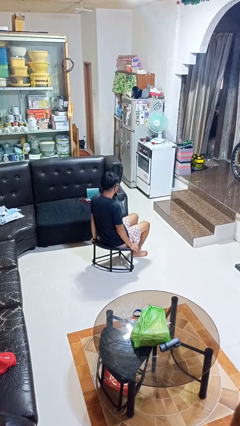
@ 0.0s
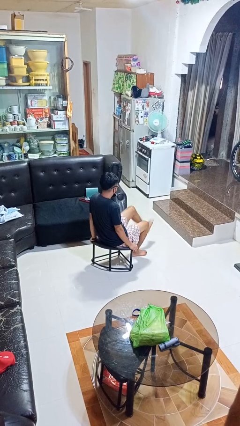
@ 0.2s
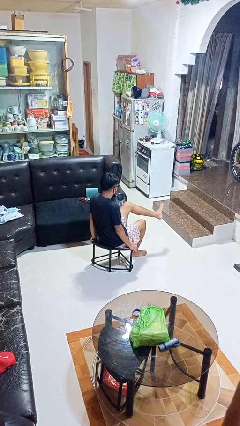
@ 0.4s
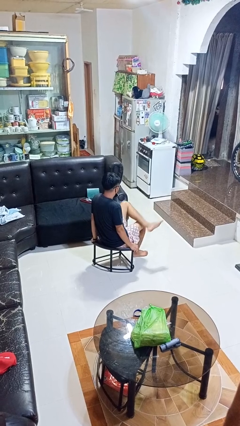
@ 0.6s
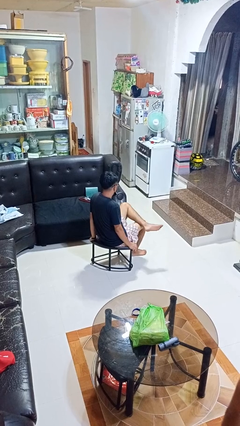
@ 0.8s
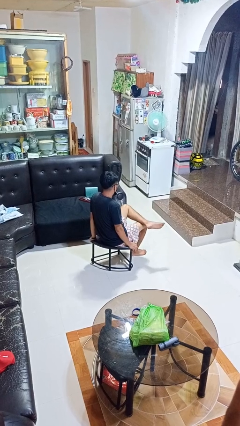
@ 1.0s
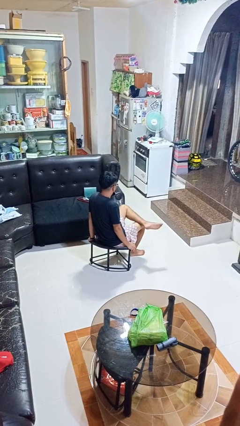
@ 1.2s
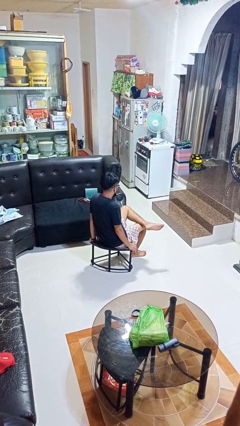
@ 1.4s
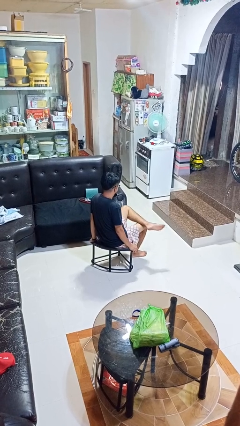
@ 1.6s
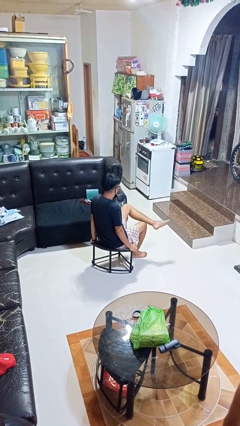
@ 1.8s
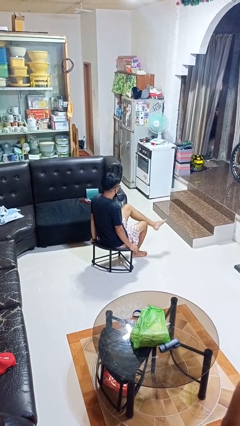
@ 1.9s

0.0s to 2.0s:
person crosses legs

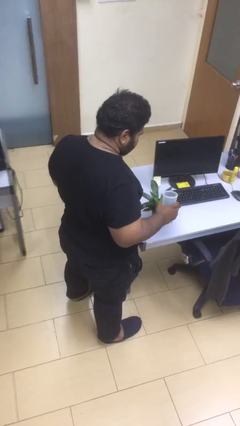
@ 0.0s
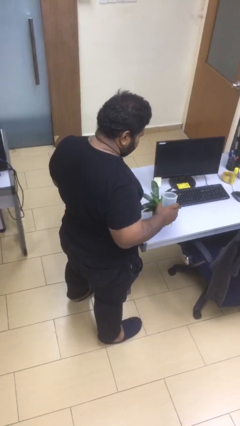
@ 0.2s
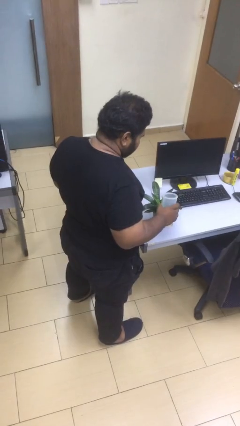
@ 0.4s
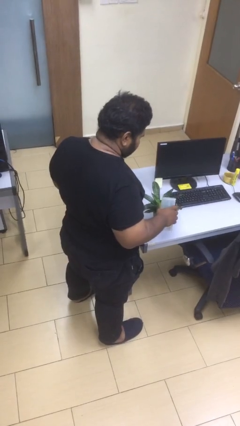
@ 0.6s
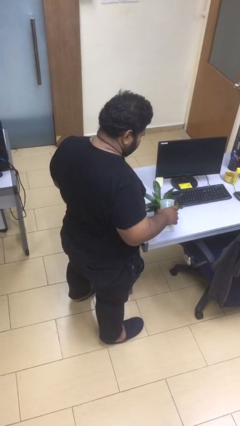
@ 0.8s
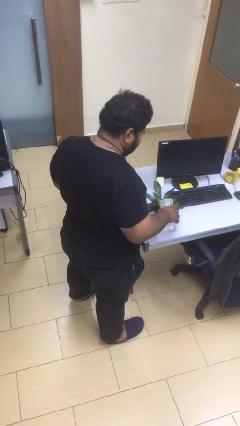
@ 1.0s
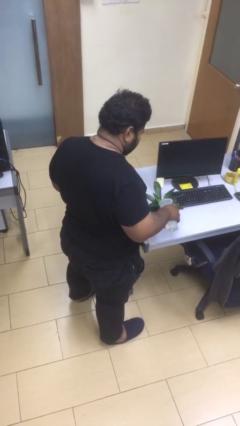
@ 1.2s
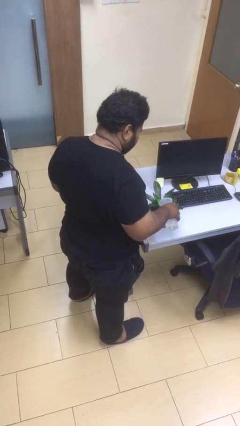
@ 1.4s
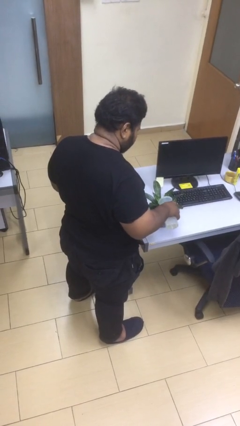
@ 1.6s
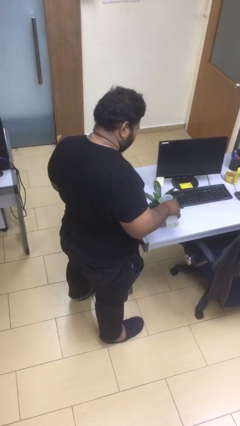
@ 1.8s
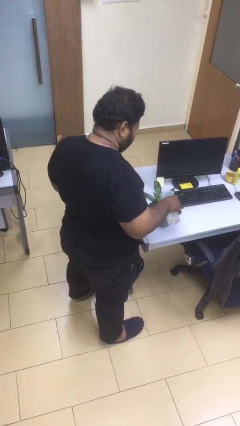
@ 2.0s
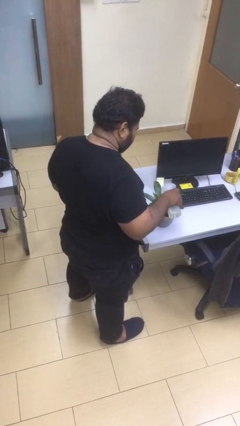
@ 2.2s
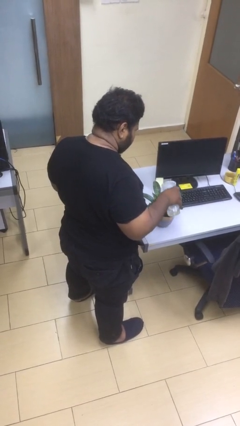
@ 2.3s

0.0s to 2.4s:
person waters houseplant

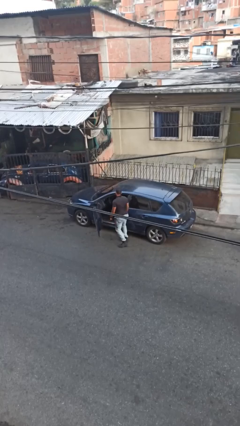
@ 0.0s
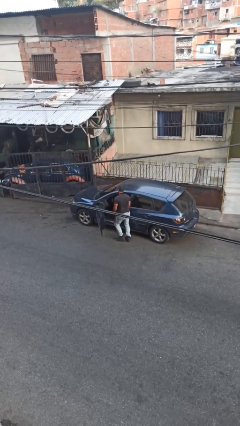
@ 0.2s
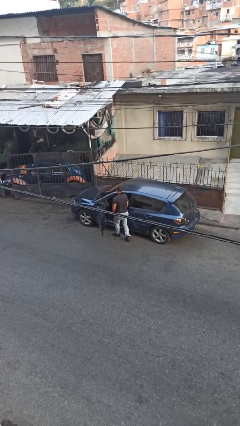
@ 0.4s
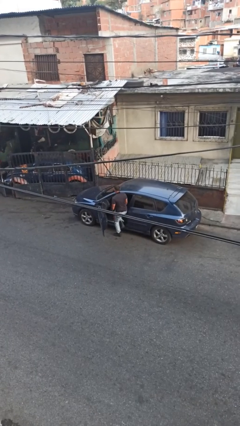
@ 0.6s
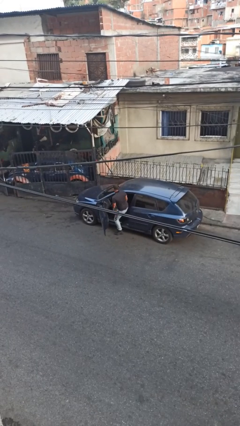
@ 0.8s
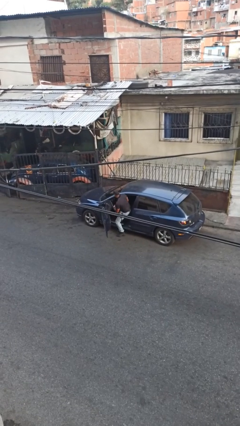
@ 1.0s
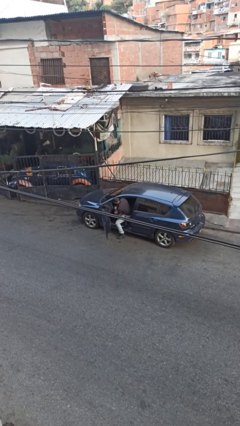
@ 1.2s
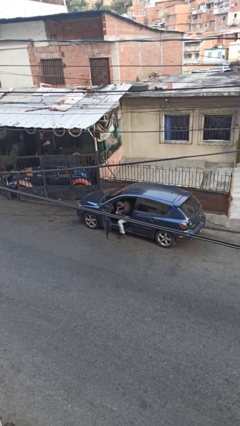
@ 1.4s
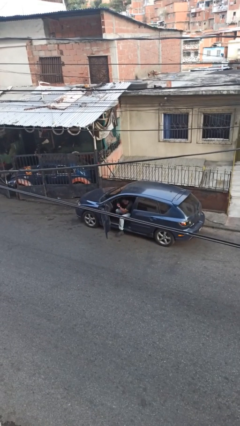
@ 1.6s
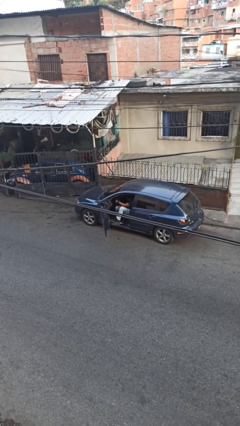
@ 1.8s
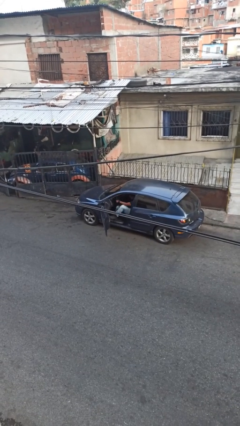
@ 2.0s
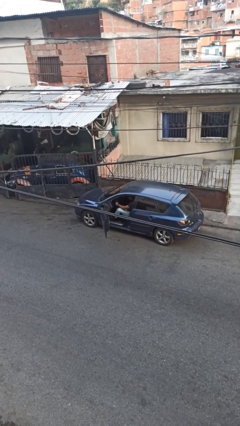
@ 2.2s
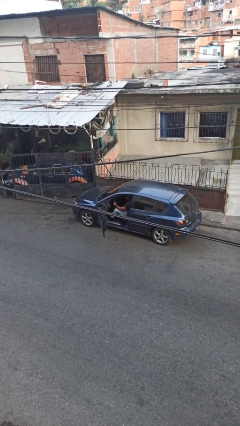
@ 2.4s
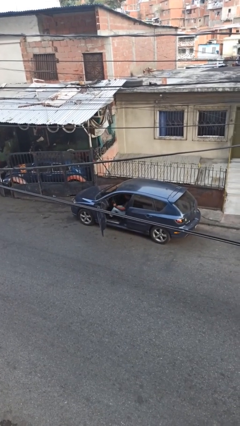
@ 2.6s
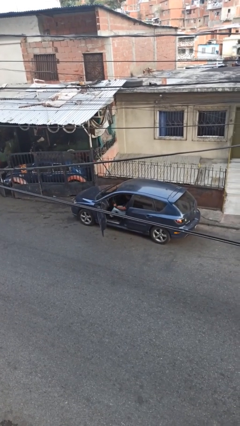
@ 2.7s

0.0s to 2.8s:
person enters car

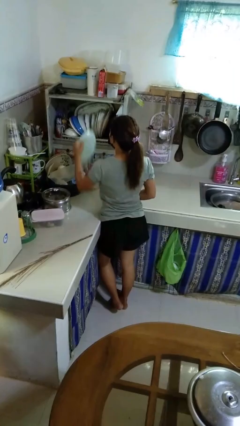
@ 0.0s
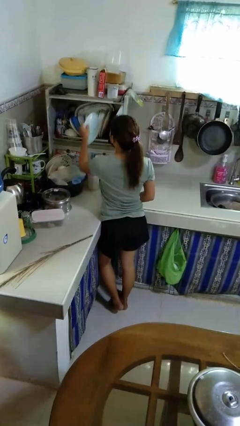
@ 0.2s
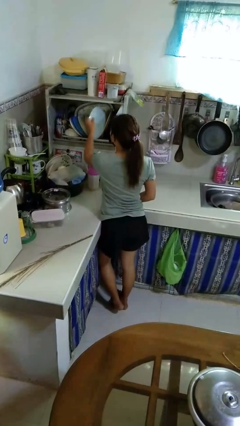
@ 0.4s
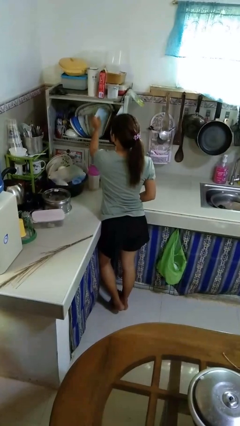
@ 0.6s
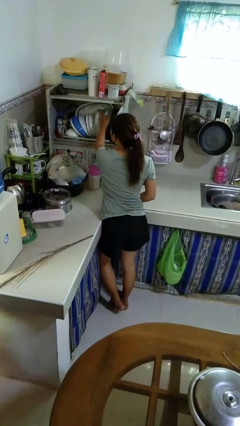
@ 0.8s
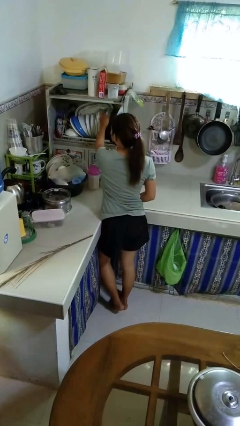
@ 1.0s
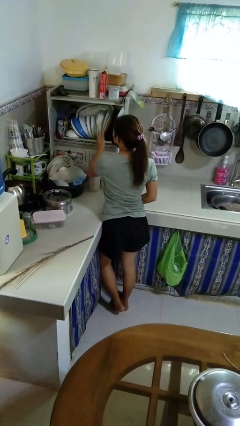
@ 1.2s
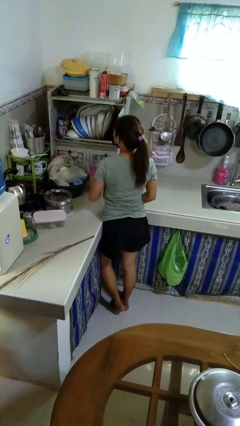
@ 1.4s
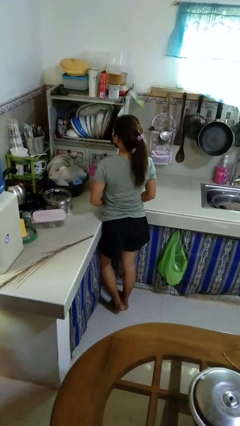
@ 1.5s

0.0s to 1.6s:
person puts object into kitchen drawer

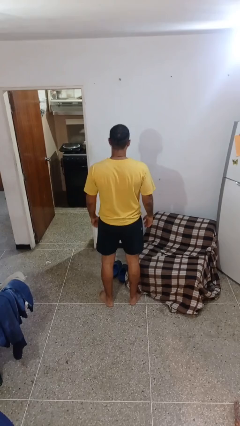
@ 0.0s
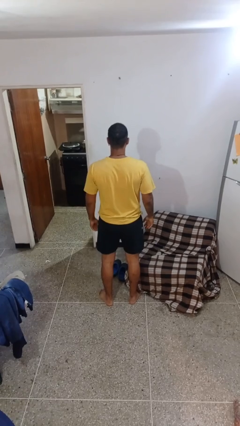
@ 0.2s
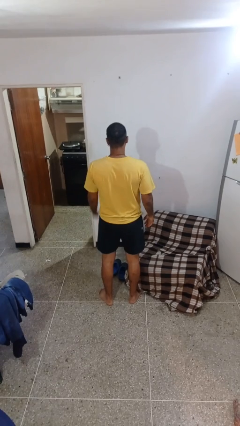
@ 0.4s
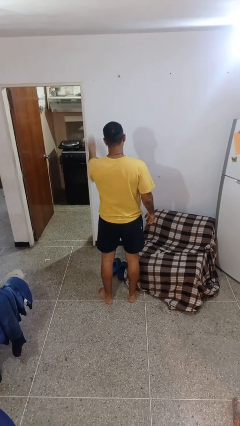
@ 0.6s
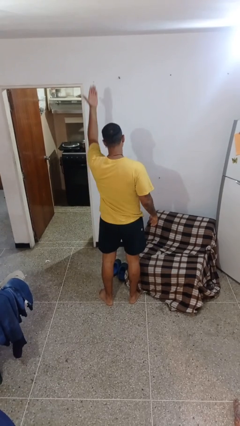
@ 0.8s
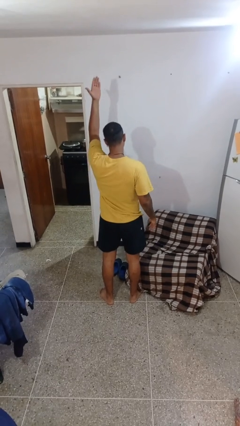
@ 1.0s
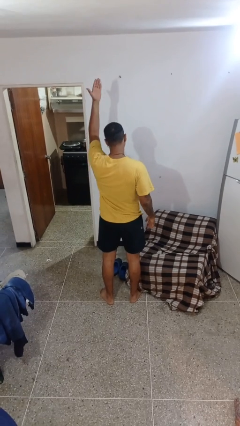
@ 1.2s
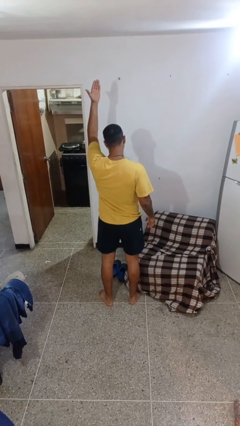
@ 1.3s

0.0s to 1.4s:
person gestures swipe up

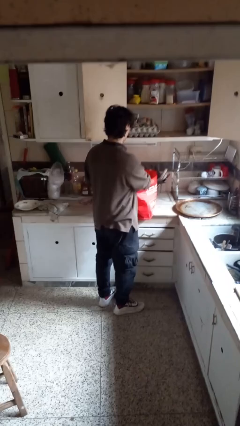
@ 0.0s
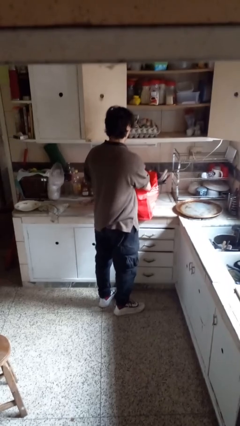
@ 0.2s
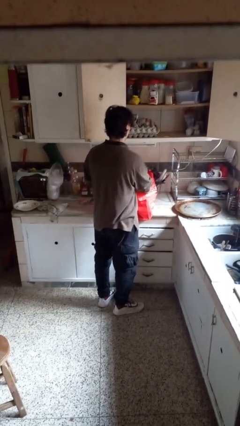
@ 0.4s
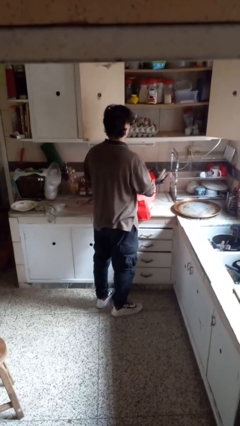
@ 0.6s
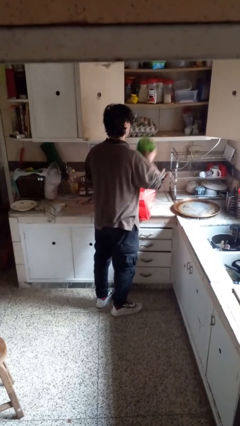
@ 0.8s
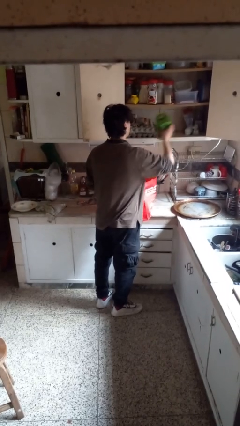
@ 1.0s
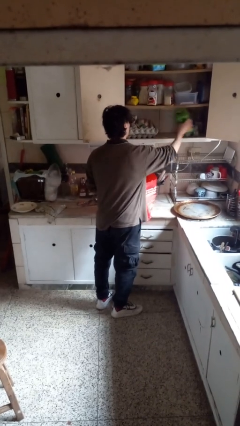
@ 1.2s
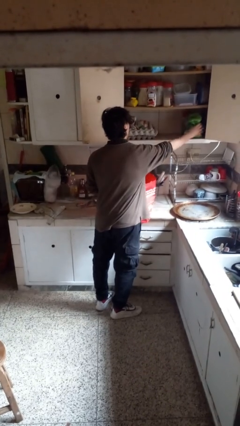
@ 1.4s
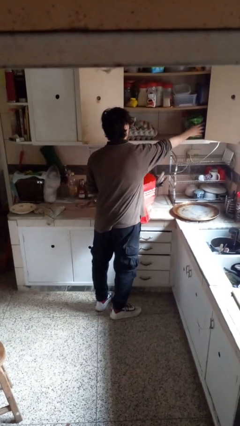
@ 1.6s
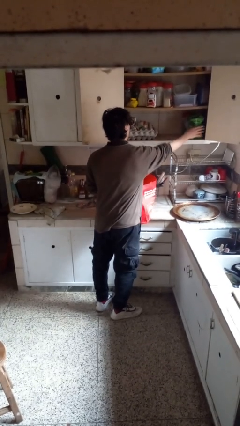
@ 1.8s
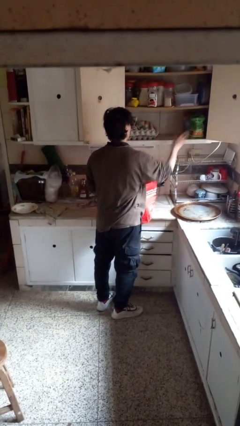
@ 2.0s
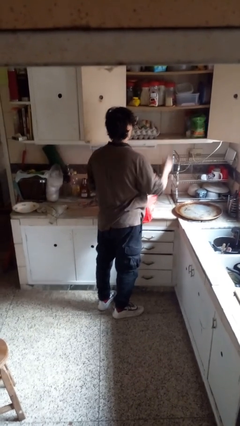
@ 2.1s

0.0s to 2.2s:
person loads groceries into cabinet

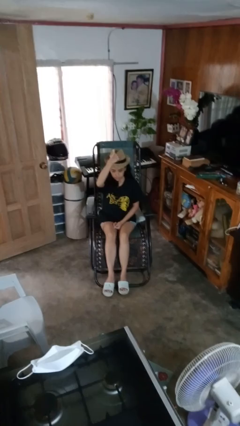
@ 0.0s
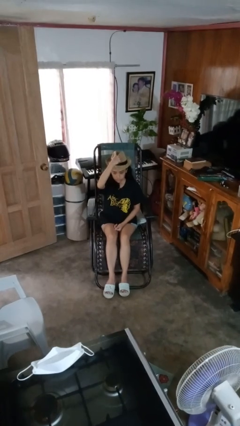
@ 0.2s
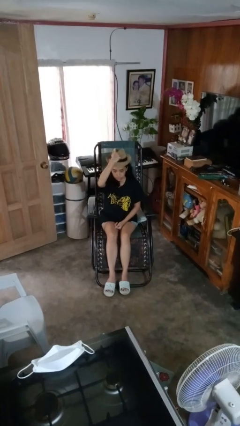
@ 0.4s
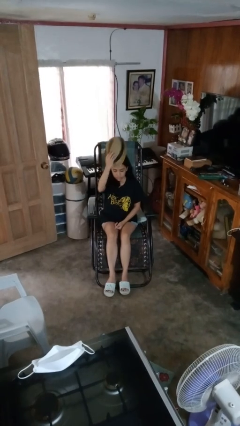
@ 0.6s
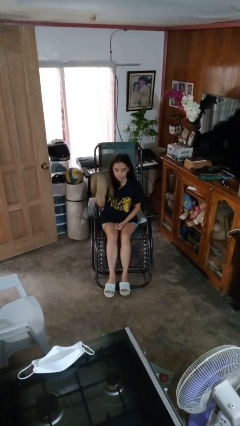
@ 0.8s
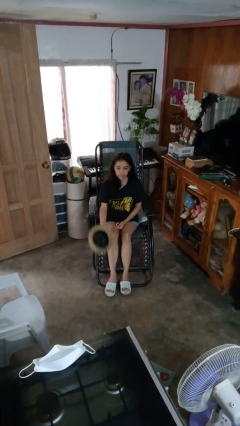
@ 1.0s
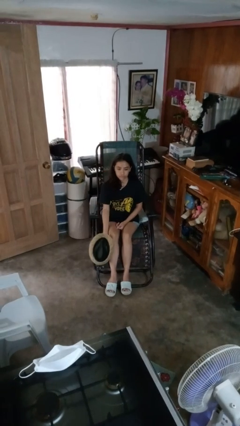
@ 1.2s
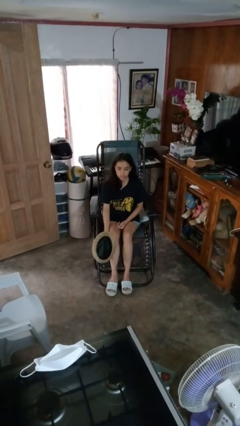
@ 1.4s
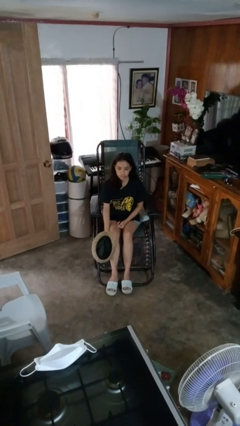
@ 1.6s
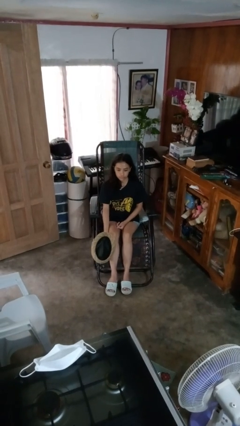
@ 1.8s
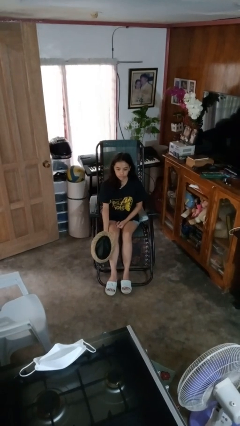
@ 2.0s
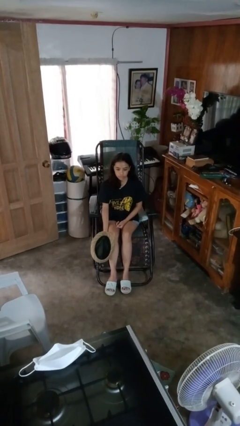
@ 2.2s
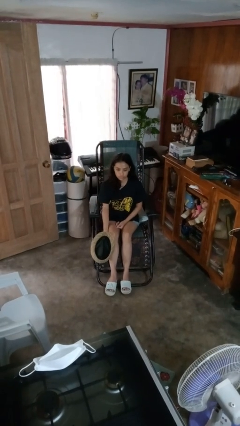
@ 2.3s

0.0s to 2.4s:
person takes off hat

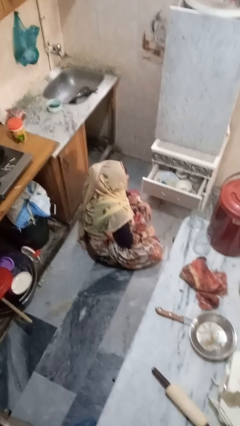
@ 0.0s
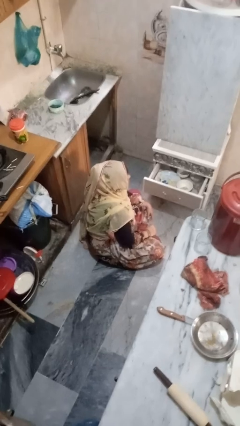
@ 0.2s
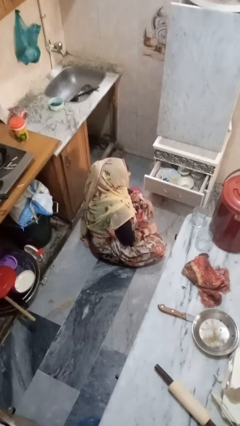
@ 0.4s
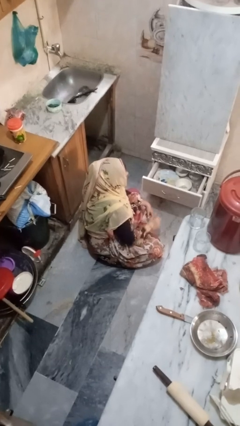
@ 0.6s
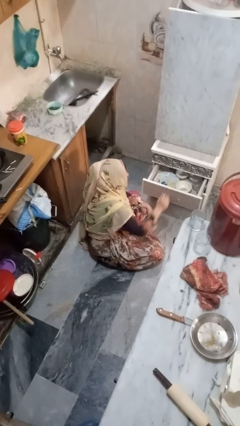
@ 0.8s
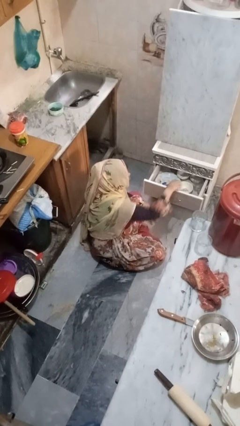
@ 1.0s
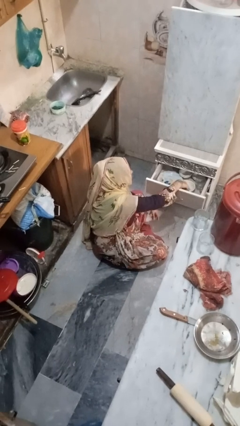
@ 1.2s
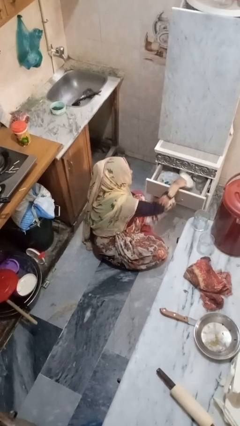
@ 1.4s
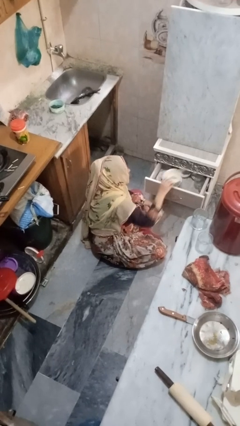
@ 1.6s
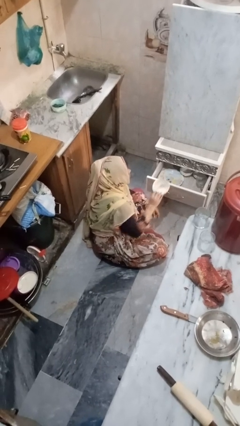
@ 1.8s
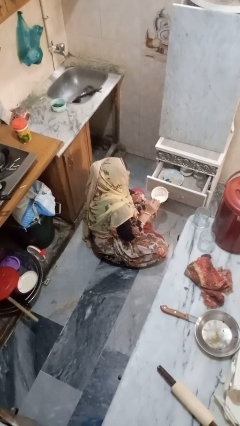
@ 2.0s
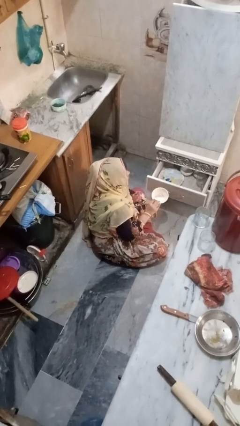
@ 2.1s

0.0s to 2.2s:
person takes object from kitchen drawer
